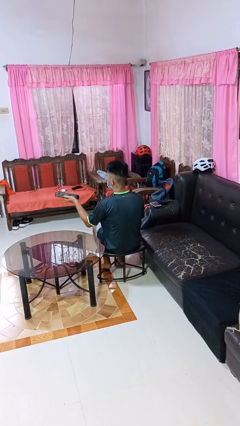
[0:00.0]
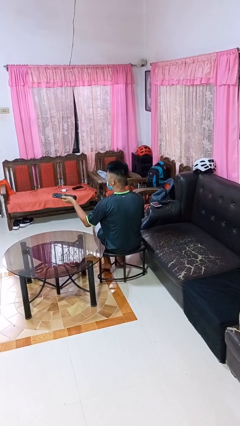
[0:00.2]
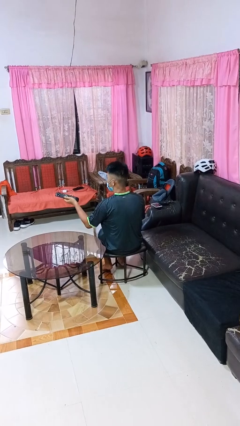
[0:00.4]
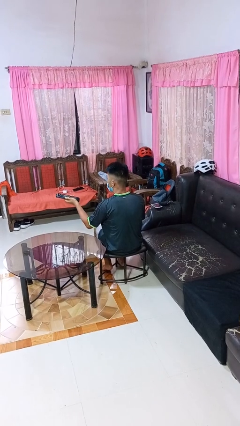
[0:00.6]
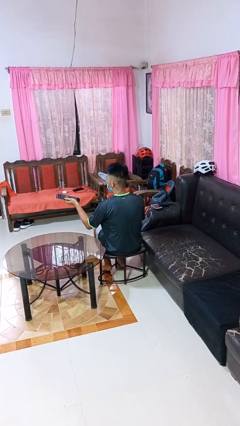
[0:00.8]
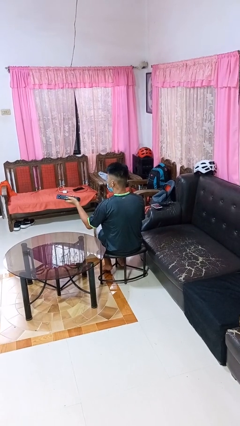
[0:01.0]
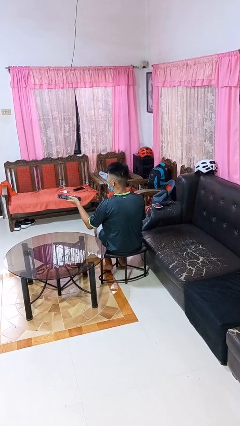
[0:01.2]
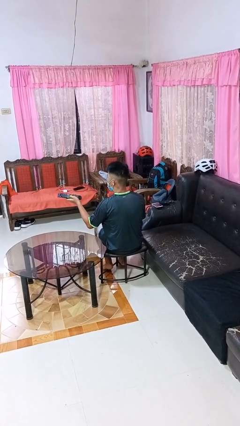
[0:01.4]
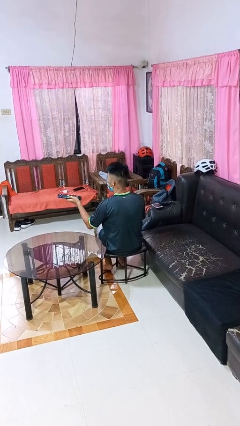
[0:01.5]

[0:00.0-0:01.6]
person uses television remote

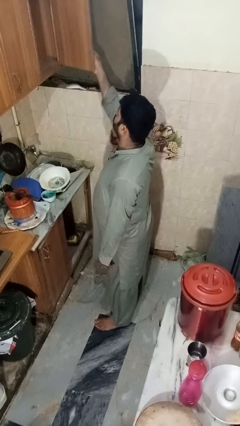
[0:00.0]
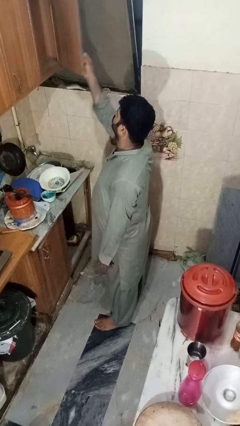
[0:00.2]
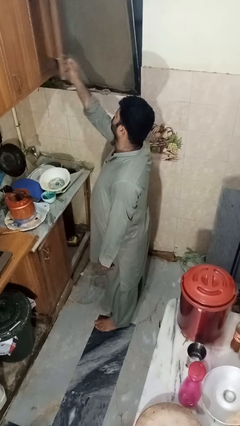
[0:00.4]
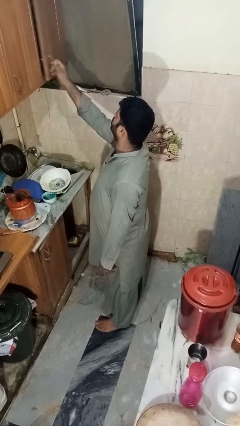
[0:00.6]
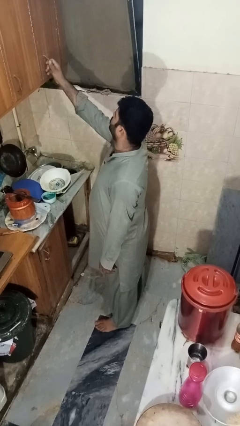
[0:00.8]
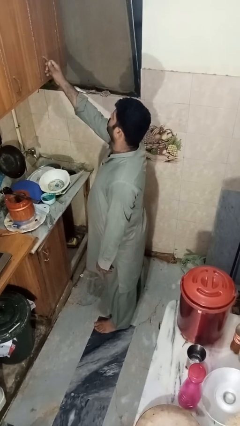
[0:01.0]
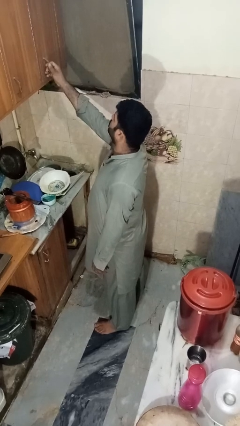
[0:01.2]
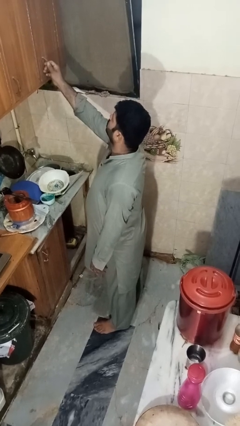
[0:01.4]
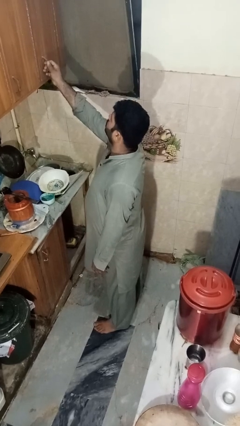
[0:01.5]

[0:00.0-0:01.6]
person closes cabinet

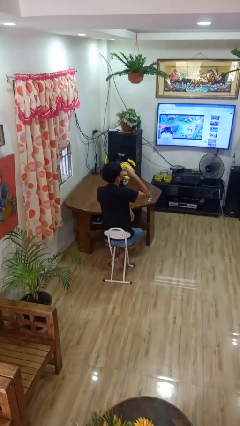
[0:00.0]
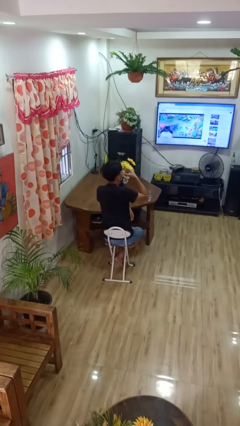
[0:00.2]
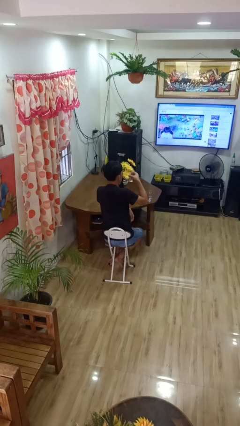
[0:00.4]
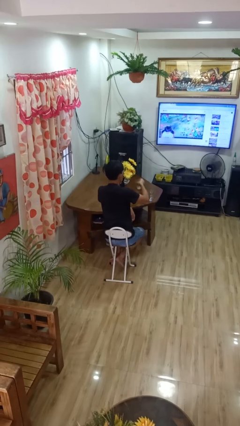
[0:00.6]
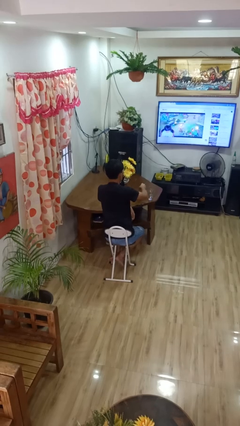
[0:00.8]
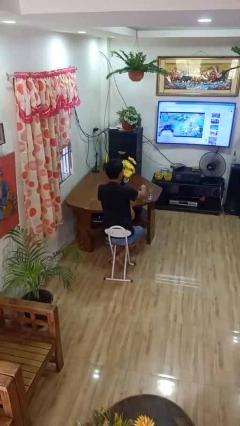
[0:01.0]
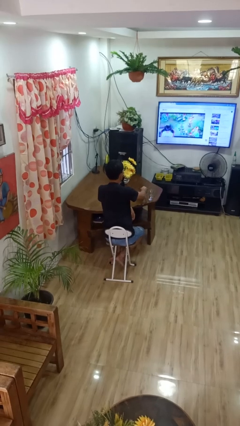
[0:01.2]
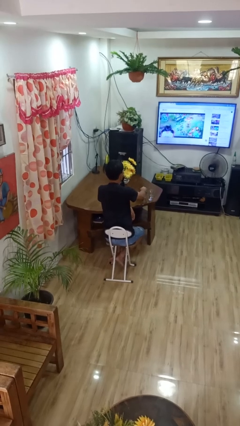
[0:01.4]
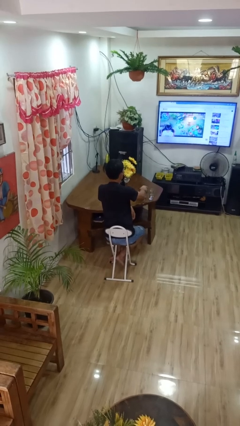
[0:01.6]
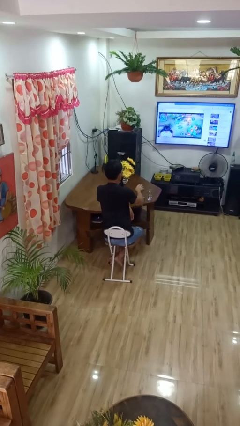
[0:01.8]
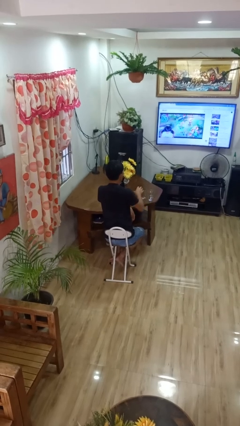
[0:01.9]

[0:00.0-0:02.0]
person puts down object on table

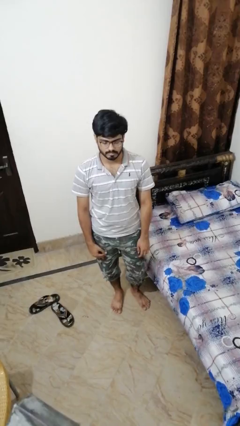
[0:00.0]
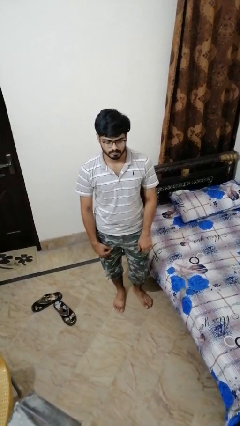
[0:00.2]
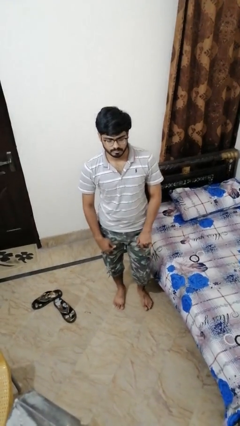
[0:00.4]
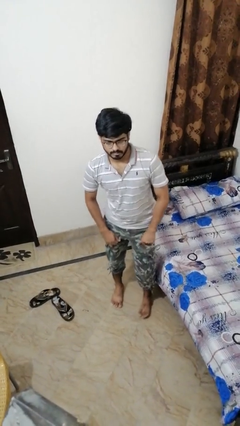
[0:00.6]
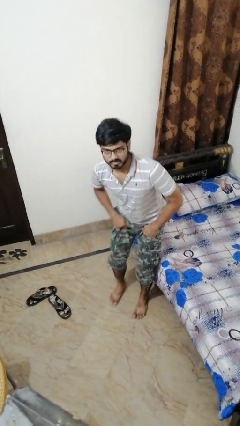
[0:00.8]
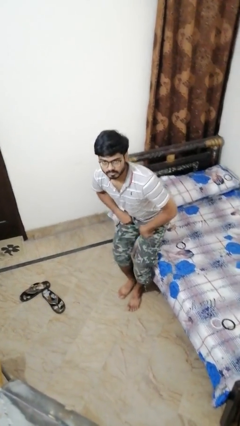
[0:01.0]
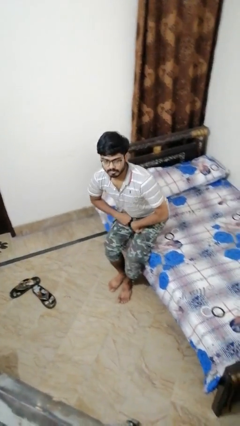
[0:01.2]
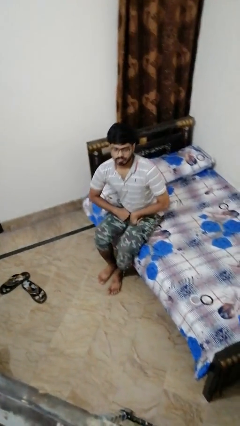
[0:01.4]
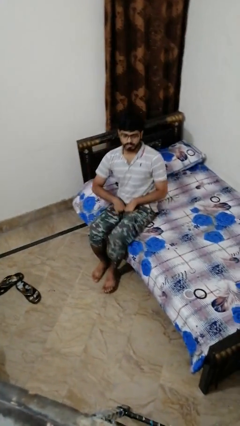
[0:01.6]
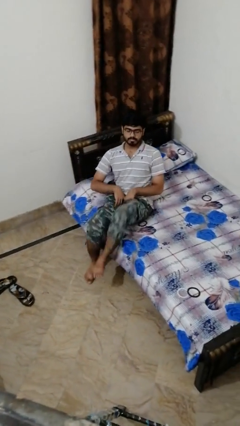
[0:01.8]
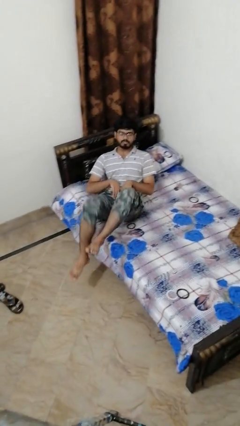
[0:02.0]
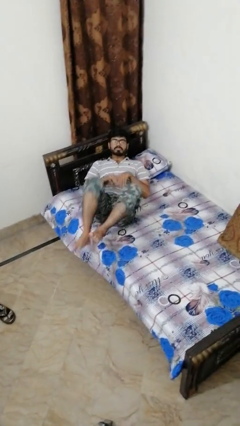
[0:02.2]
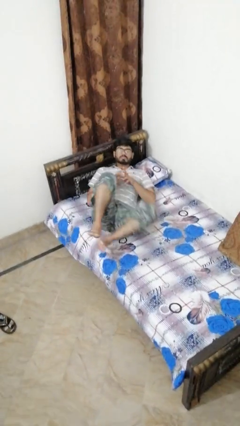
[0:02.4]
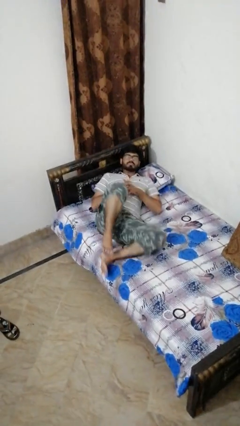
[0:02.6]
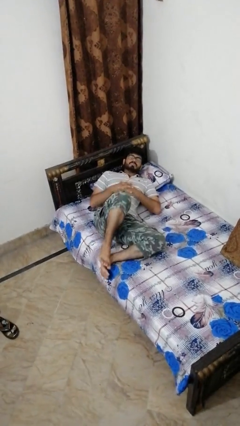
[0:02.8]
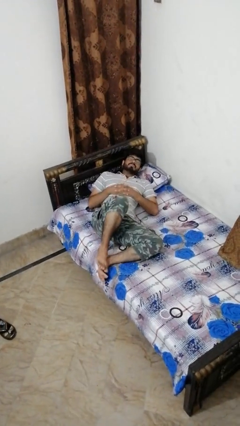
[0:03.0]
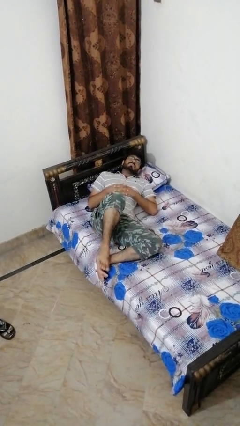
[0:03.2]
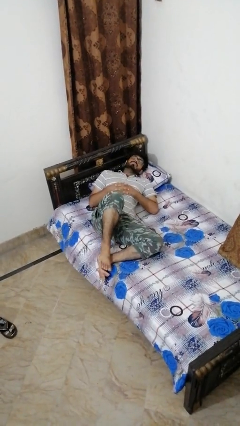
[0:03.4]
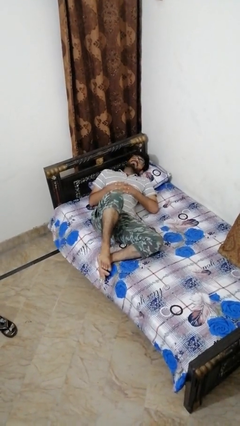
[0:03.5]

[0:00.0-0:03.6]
person lies down on bed

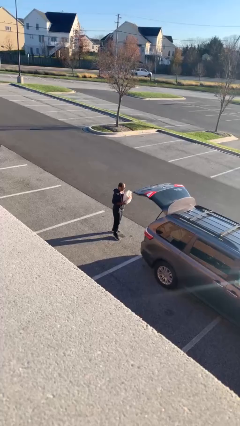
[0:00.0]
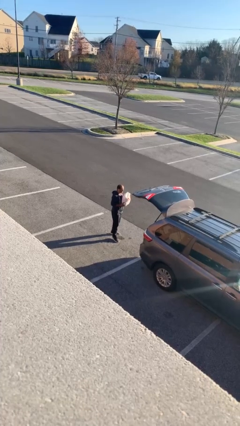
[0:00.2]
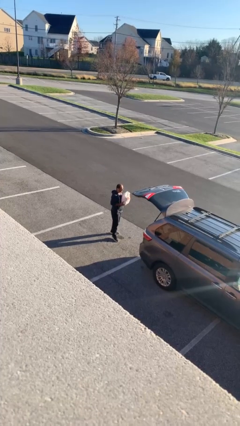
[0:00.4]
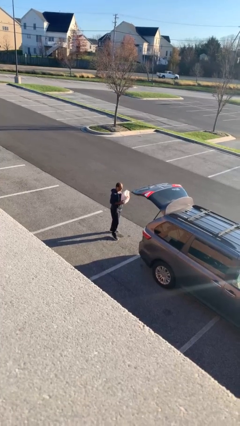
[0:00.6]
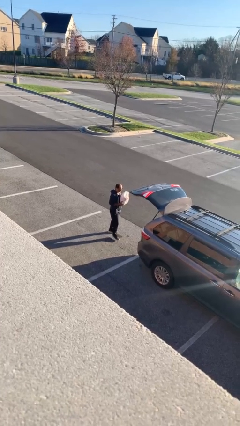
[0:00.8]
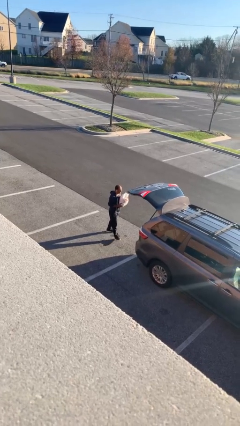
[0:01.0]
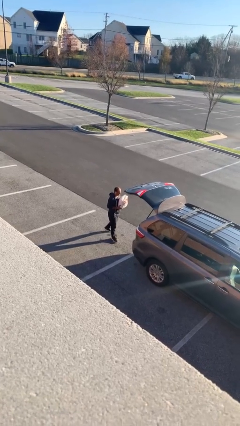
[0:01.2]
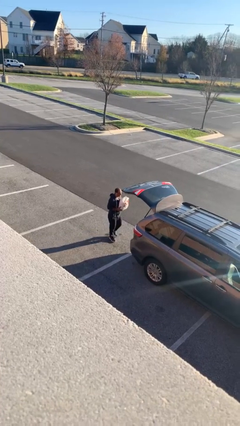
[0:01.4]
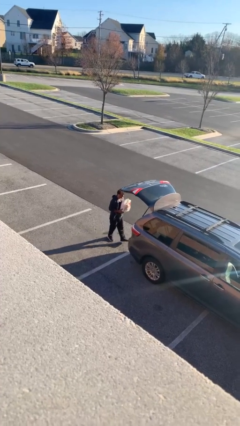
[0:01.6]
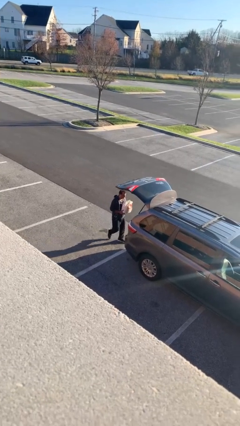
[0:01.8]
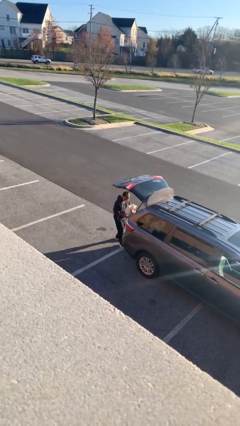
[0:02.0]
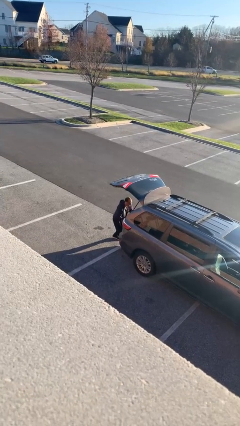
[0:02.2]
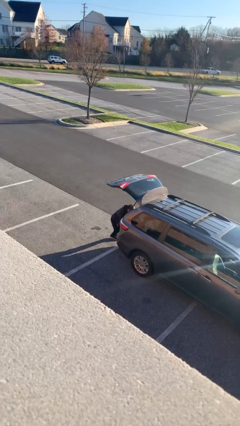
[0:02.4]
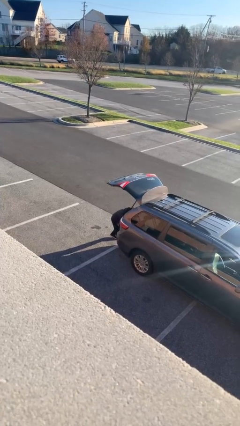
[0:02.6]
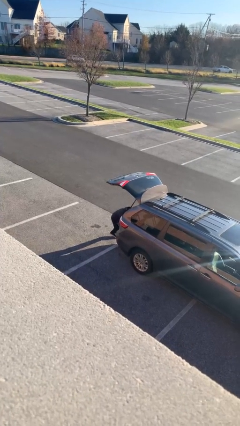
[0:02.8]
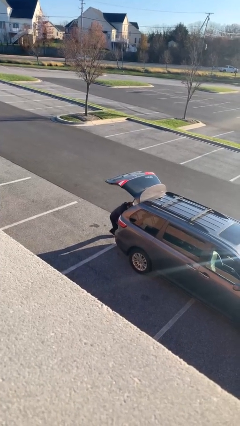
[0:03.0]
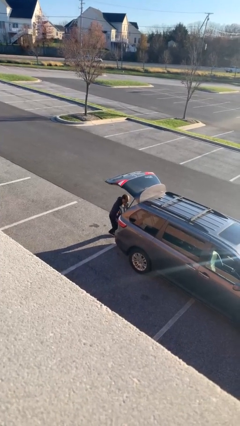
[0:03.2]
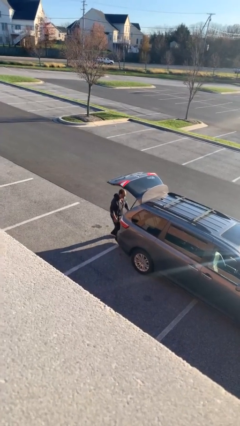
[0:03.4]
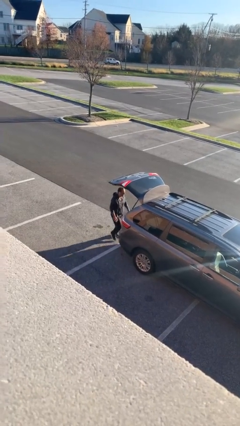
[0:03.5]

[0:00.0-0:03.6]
person loads car

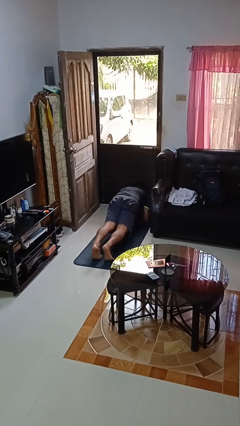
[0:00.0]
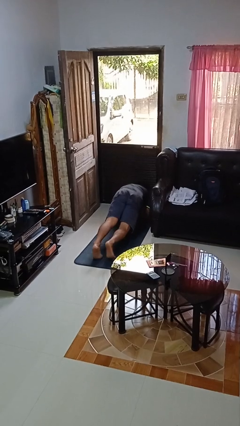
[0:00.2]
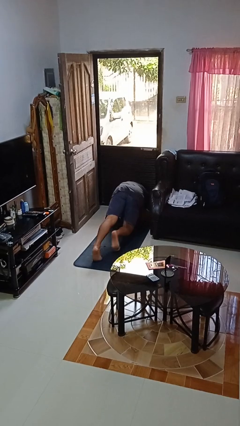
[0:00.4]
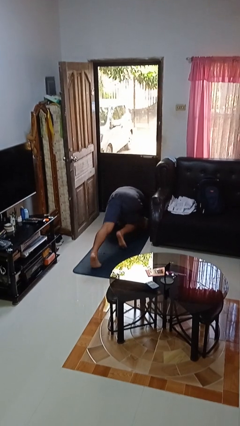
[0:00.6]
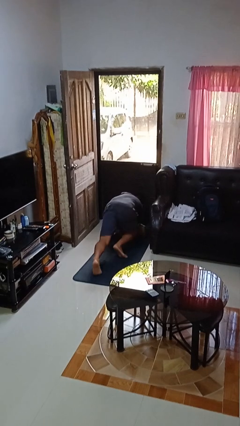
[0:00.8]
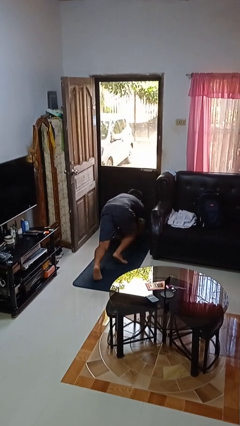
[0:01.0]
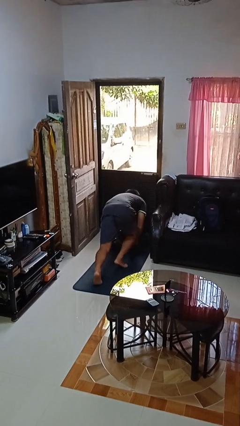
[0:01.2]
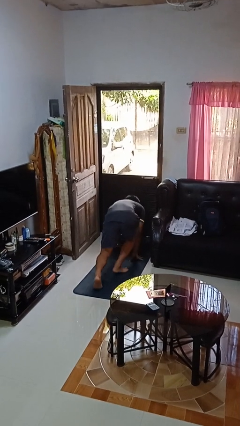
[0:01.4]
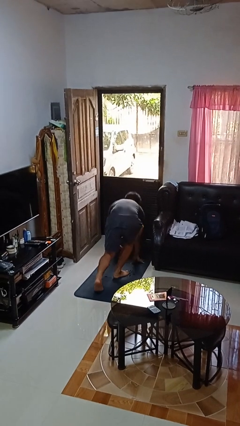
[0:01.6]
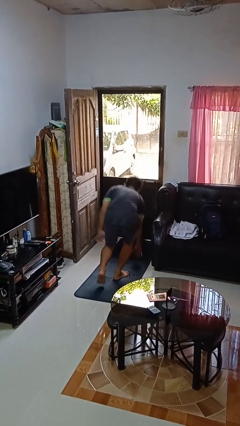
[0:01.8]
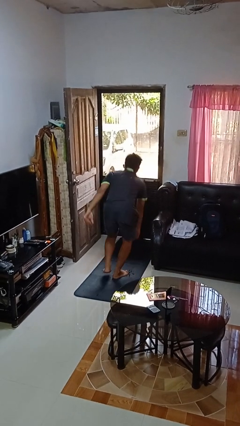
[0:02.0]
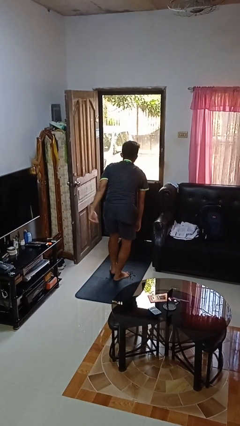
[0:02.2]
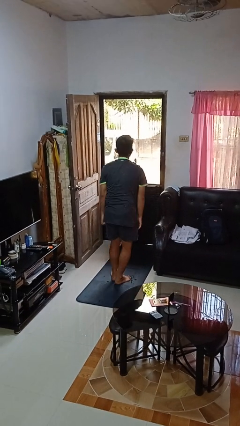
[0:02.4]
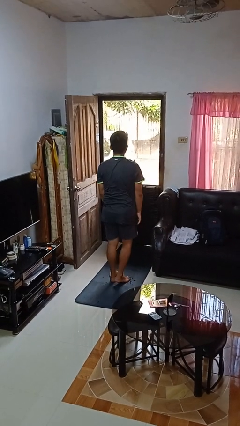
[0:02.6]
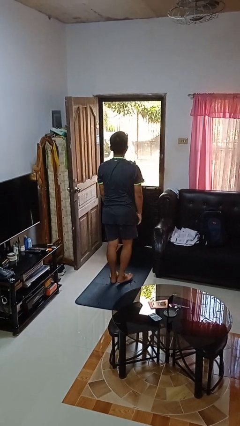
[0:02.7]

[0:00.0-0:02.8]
person stands up from floor

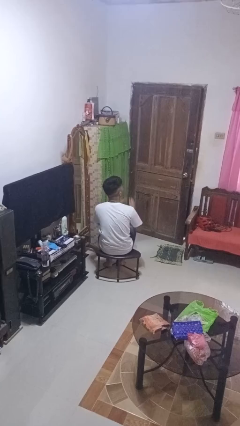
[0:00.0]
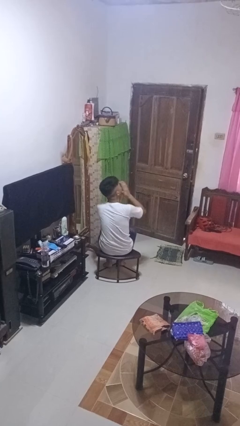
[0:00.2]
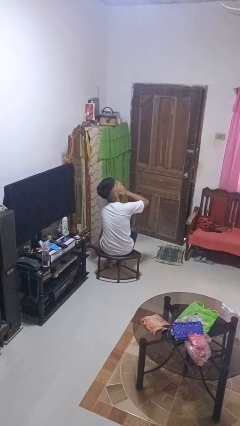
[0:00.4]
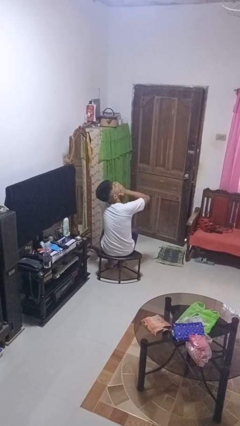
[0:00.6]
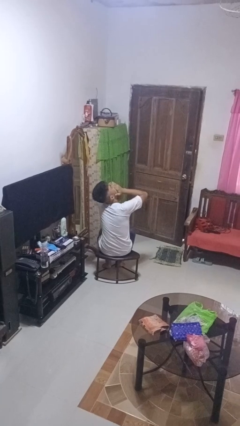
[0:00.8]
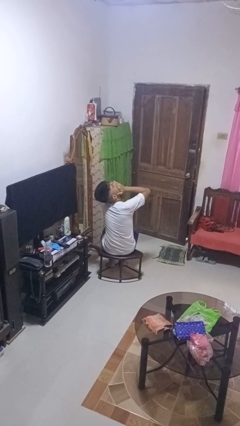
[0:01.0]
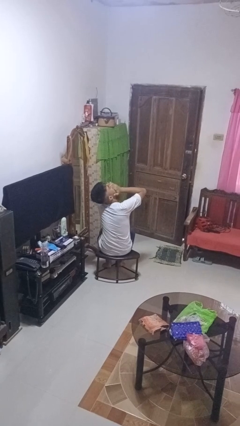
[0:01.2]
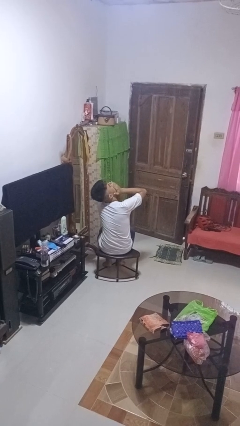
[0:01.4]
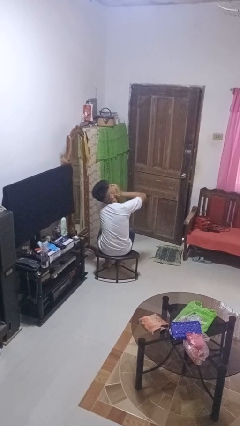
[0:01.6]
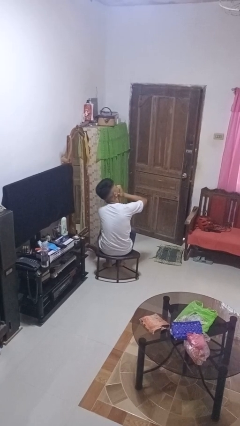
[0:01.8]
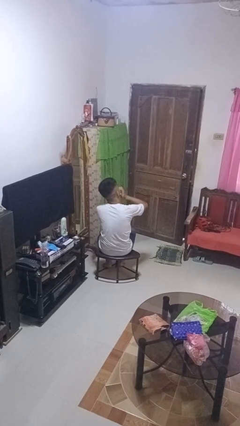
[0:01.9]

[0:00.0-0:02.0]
person yawns
